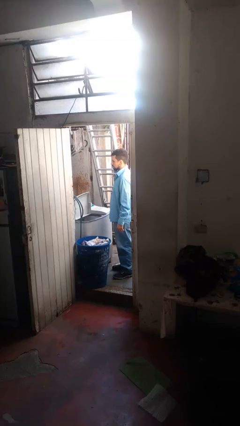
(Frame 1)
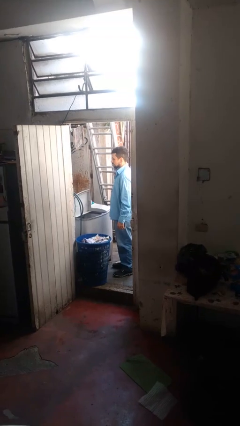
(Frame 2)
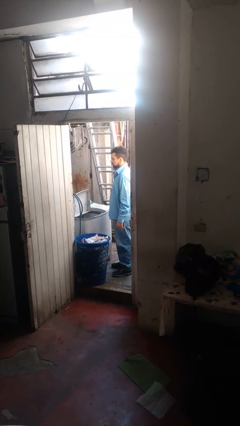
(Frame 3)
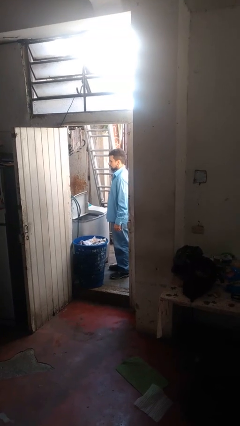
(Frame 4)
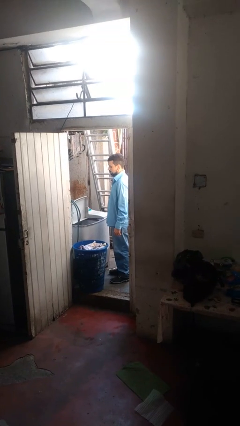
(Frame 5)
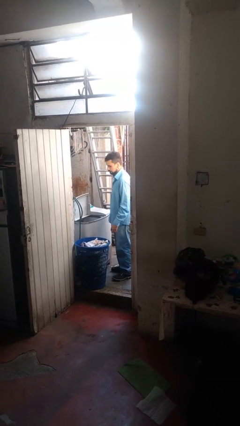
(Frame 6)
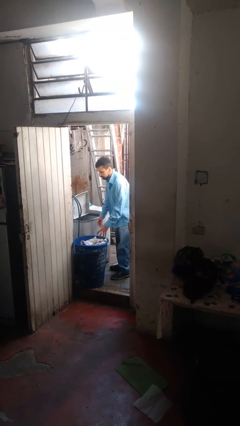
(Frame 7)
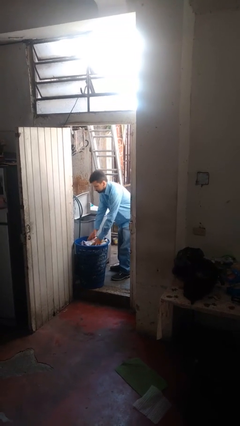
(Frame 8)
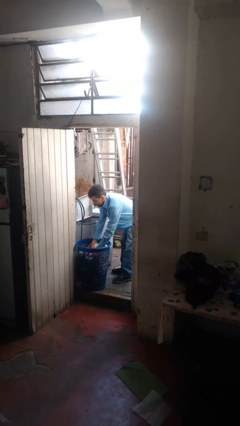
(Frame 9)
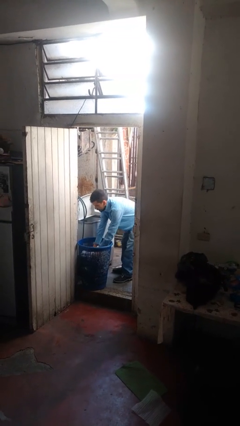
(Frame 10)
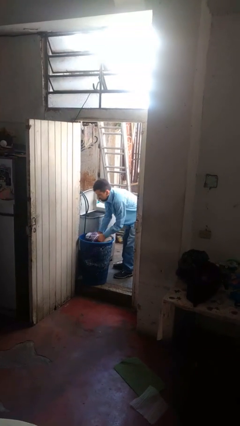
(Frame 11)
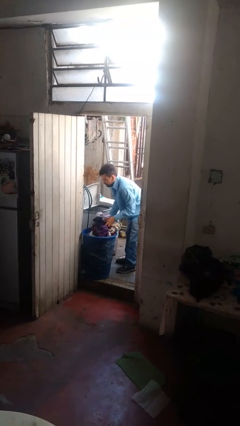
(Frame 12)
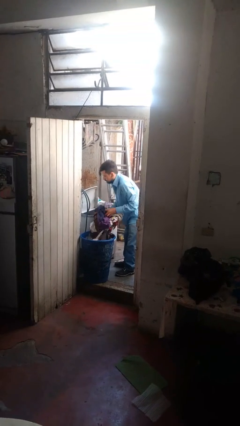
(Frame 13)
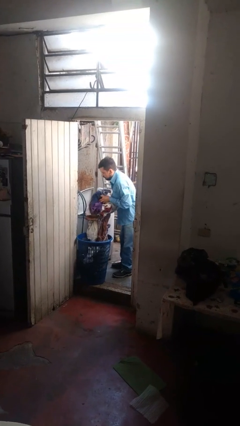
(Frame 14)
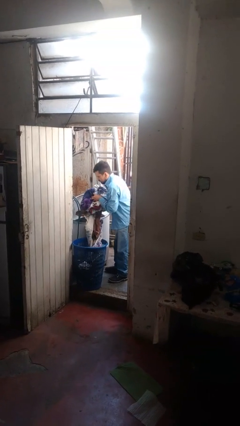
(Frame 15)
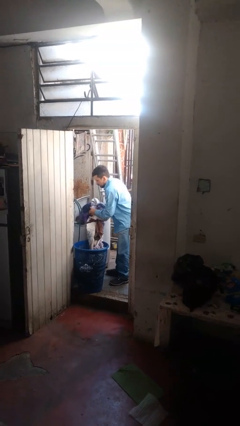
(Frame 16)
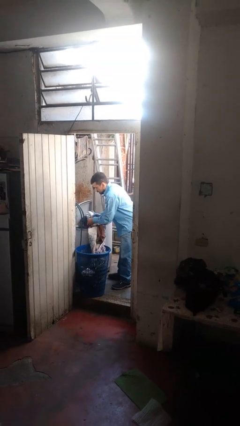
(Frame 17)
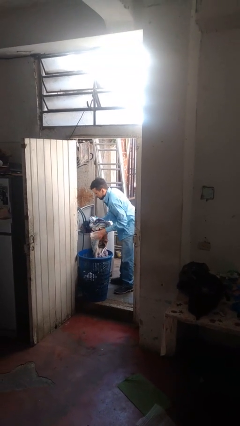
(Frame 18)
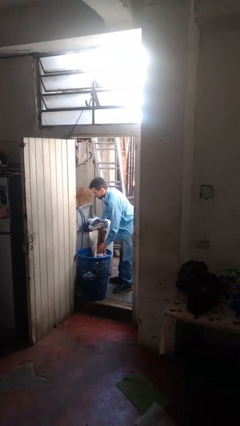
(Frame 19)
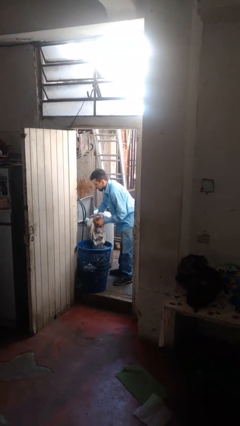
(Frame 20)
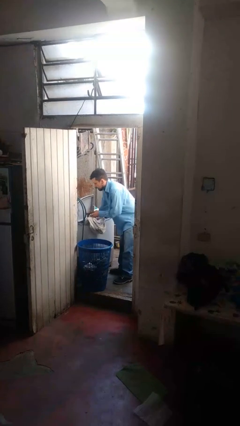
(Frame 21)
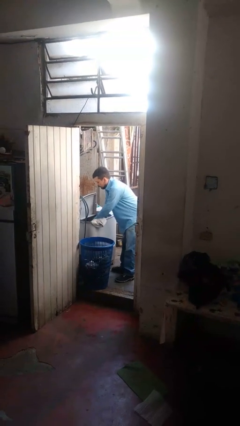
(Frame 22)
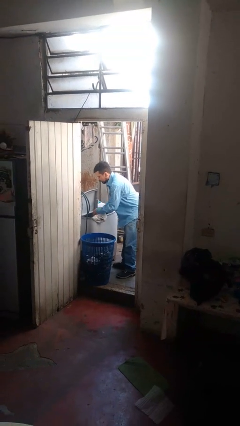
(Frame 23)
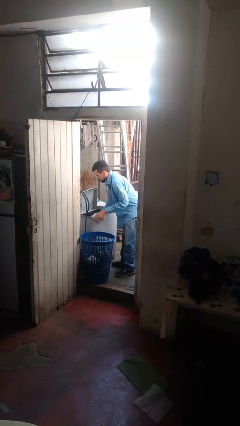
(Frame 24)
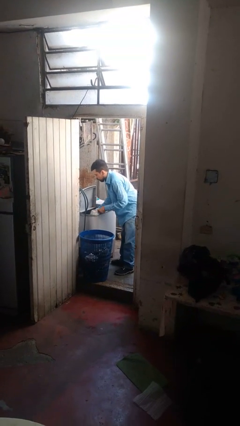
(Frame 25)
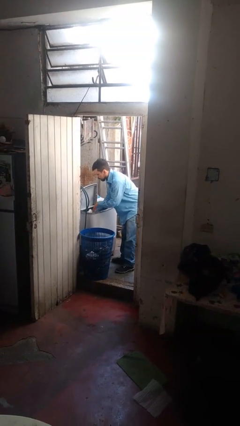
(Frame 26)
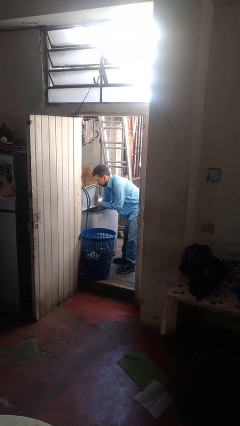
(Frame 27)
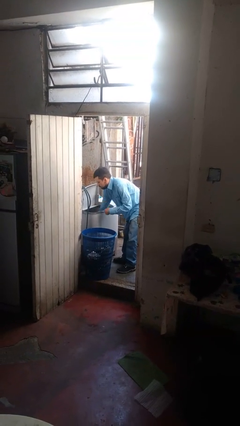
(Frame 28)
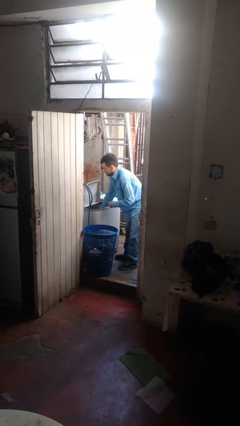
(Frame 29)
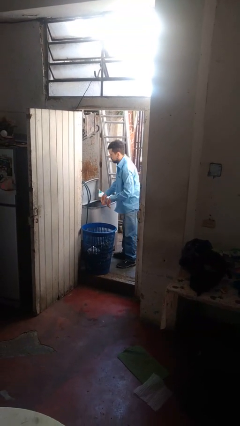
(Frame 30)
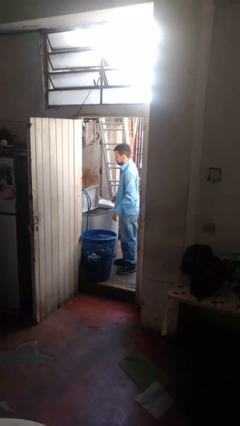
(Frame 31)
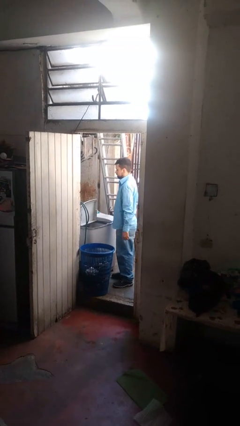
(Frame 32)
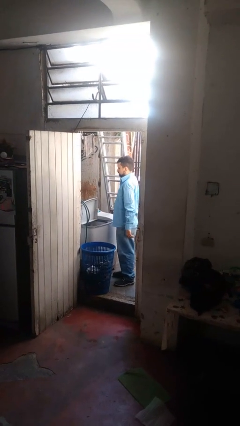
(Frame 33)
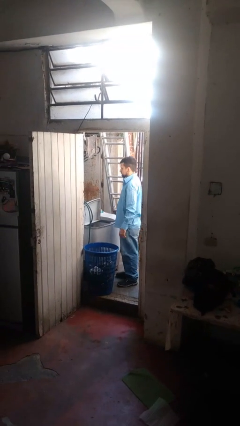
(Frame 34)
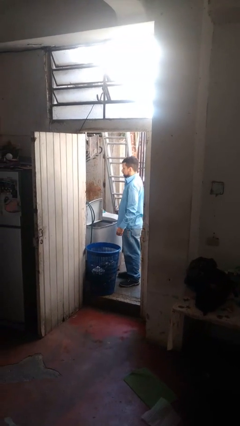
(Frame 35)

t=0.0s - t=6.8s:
person loads clotheswasher

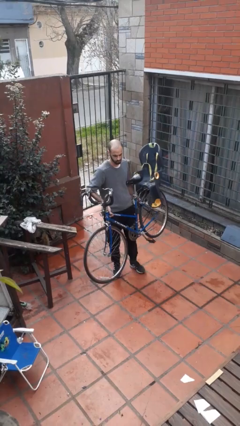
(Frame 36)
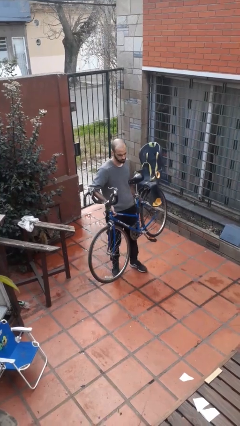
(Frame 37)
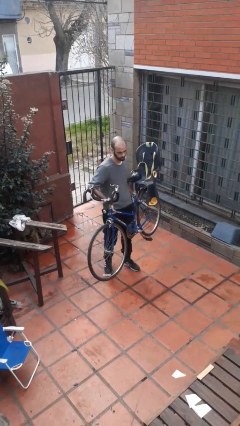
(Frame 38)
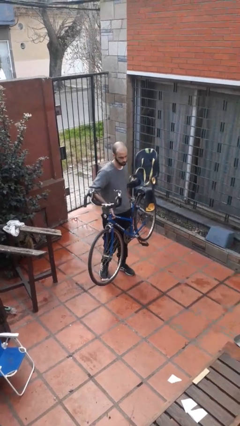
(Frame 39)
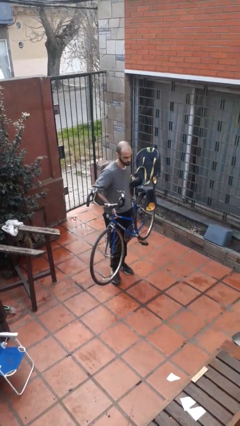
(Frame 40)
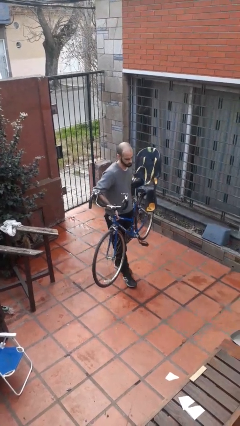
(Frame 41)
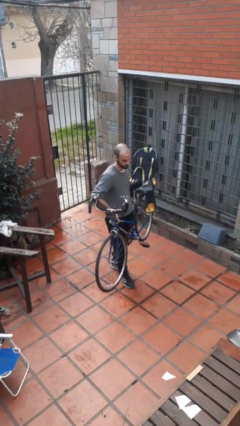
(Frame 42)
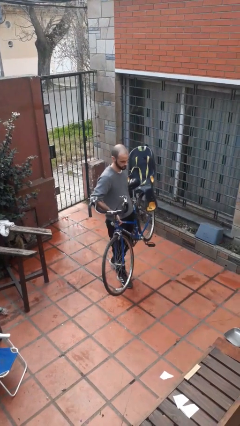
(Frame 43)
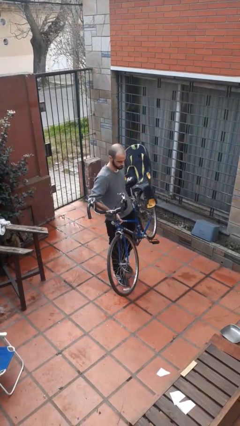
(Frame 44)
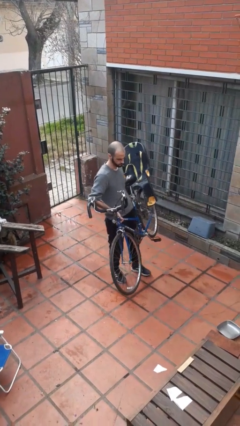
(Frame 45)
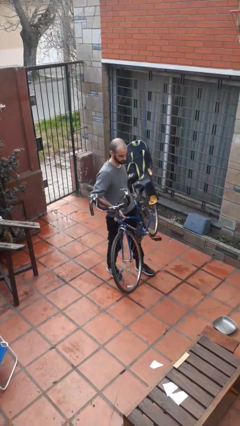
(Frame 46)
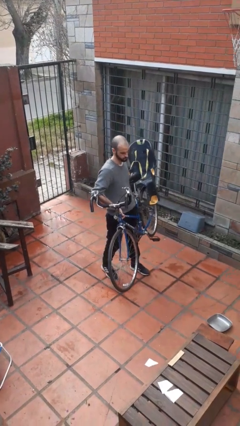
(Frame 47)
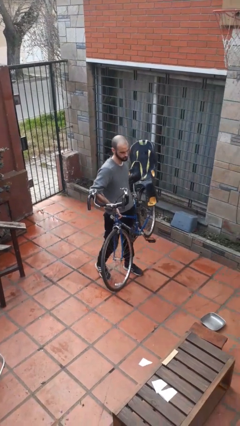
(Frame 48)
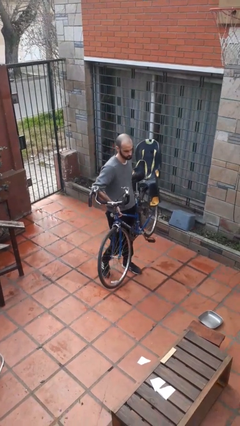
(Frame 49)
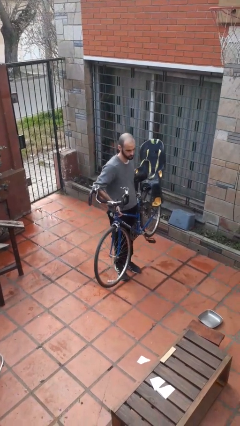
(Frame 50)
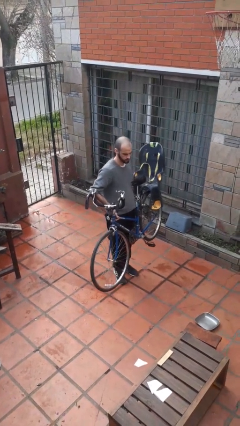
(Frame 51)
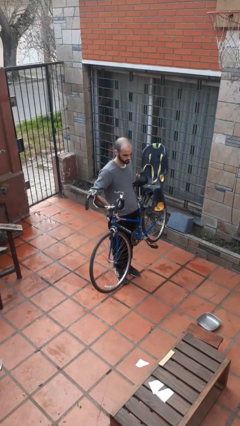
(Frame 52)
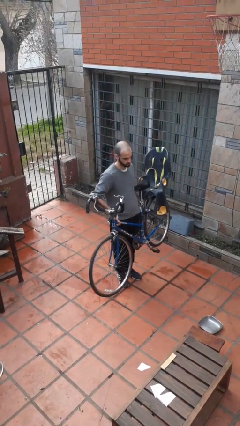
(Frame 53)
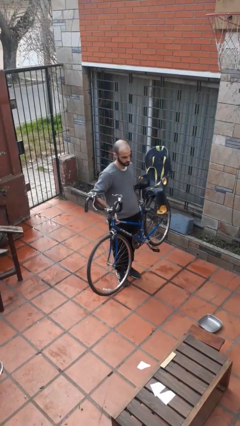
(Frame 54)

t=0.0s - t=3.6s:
person carries bicycle

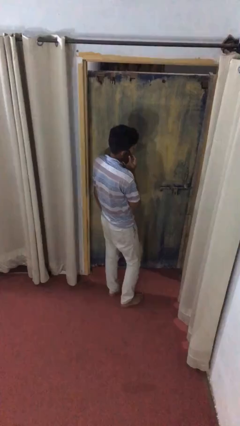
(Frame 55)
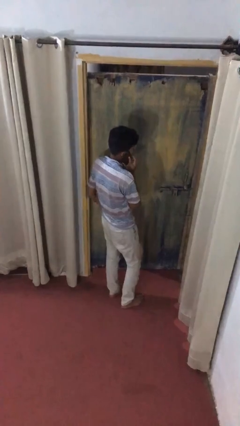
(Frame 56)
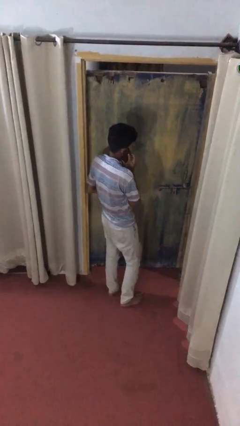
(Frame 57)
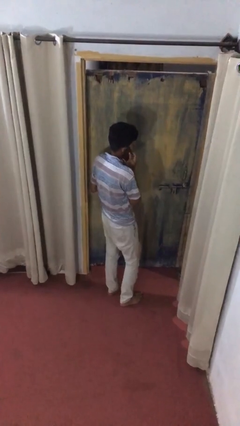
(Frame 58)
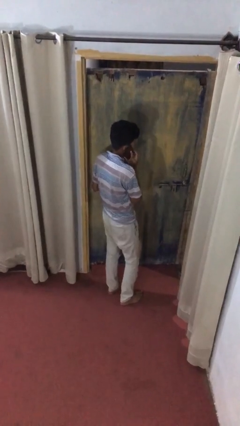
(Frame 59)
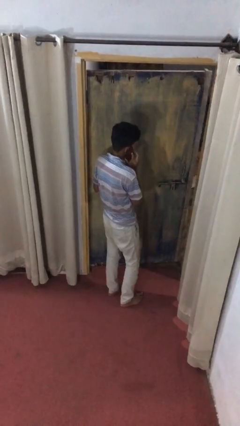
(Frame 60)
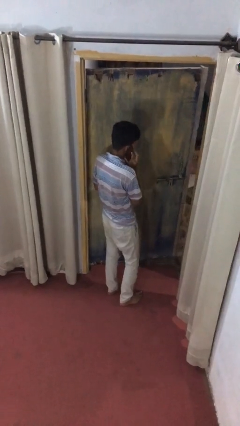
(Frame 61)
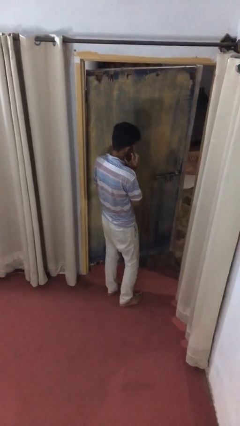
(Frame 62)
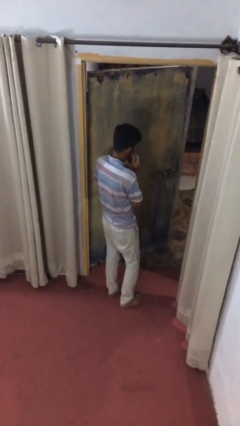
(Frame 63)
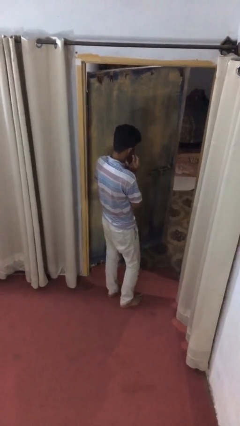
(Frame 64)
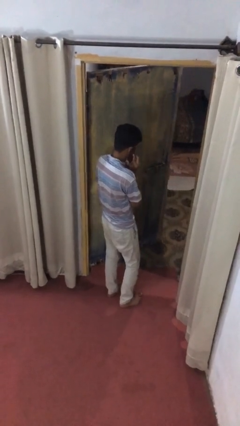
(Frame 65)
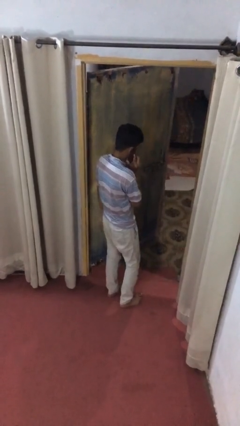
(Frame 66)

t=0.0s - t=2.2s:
person opens facility door

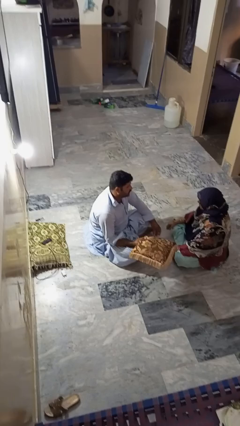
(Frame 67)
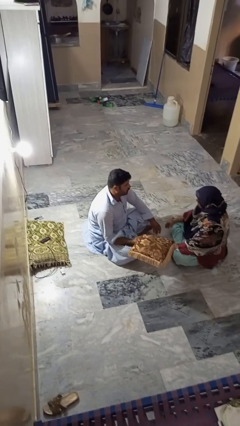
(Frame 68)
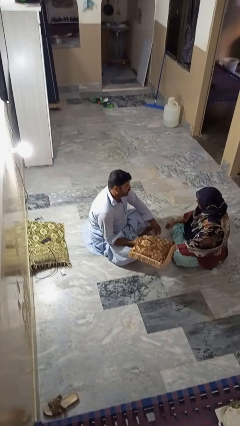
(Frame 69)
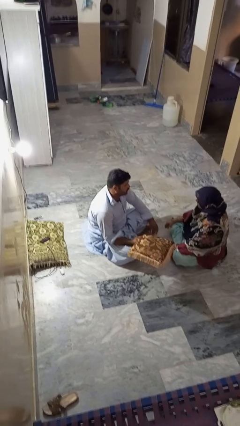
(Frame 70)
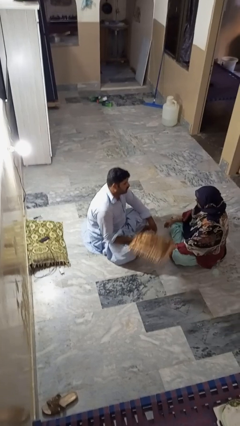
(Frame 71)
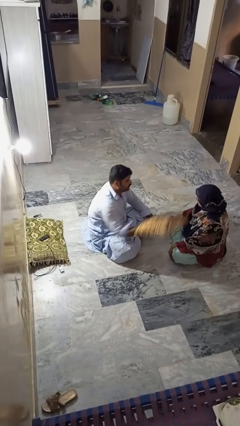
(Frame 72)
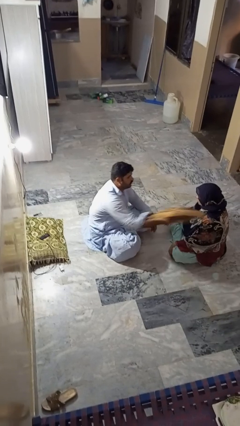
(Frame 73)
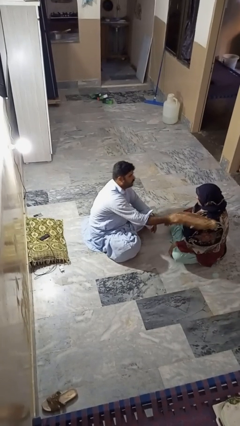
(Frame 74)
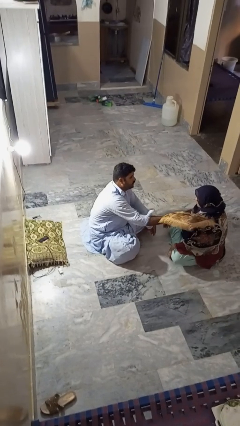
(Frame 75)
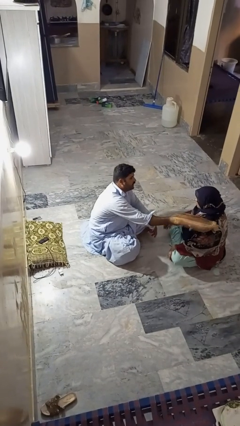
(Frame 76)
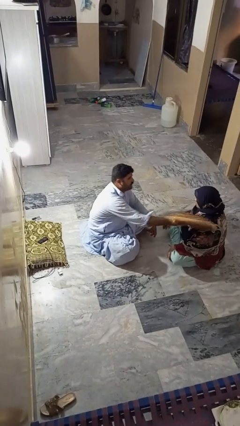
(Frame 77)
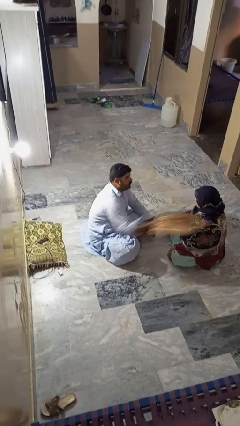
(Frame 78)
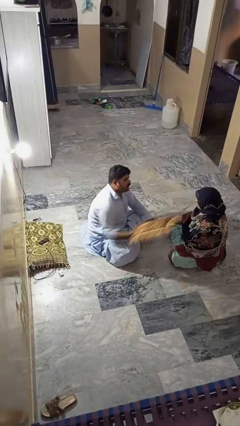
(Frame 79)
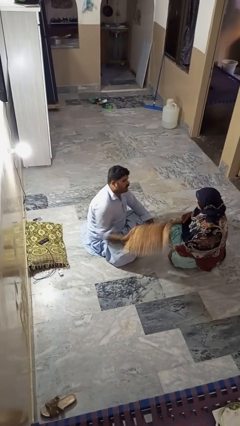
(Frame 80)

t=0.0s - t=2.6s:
person hits person with pillow

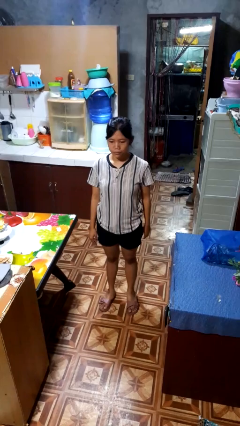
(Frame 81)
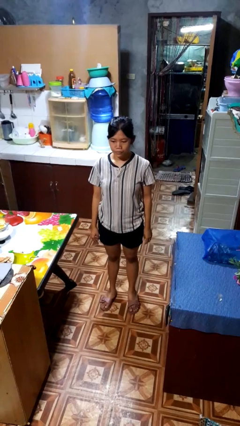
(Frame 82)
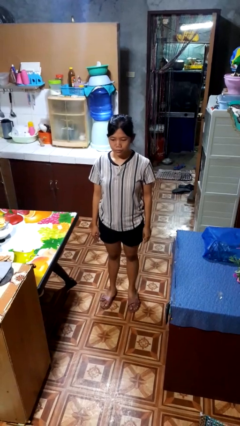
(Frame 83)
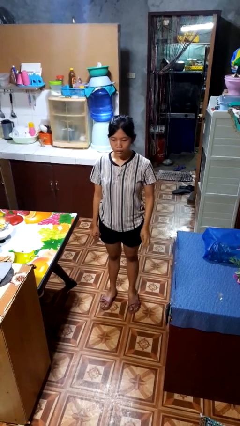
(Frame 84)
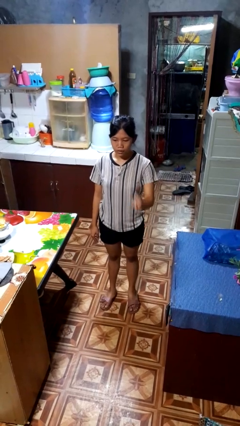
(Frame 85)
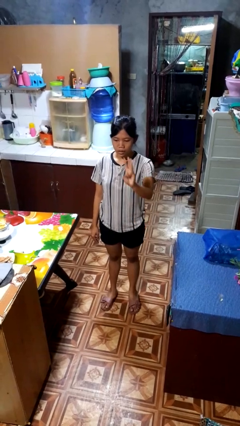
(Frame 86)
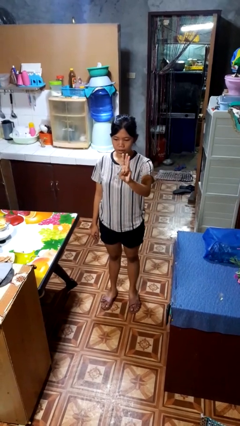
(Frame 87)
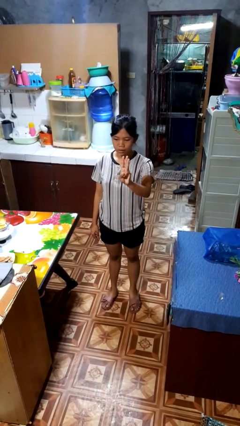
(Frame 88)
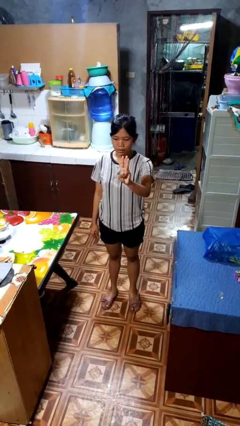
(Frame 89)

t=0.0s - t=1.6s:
person gestures number three

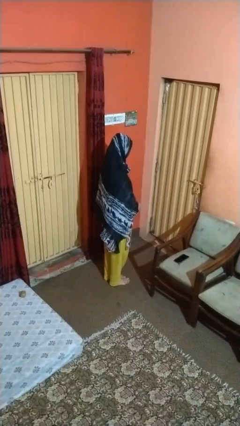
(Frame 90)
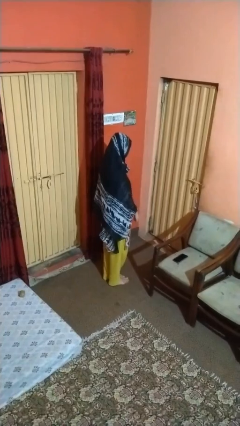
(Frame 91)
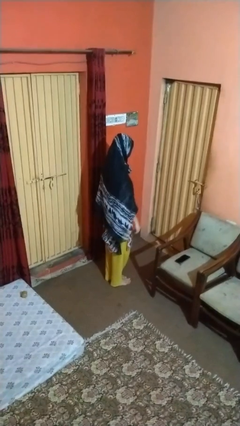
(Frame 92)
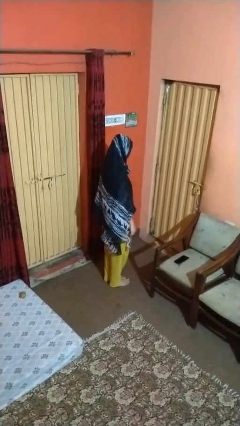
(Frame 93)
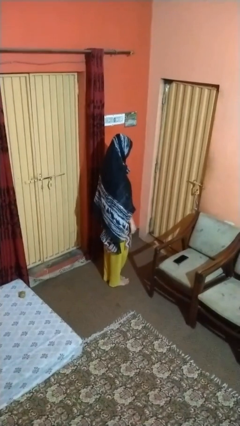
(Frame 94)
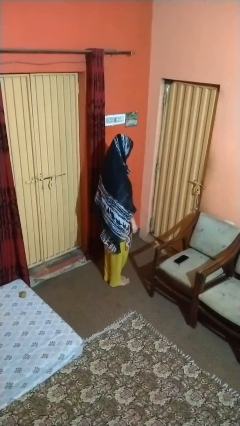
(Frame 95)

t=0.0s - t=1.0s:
person takes off wristwatch
